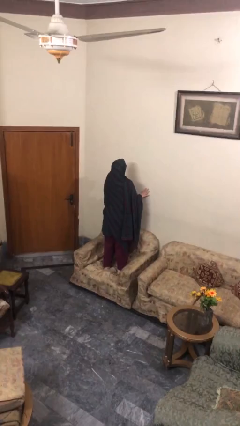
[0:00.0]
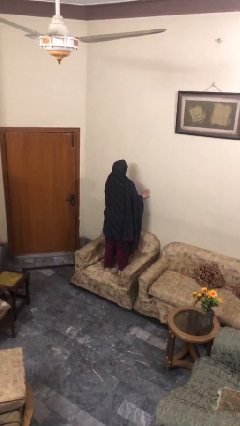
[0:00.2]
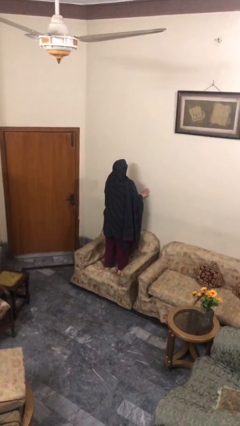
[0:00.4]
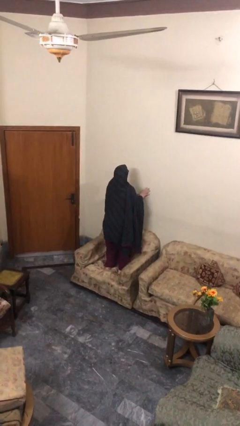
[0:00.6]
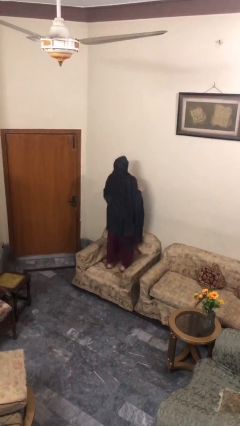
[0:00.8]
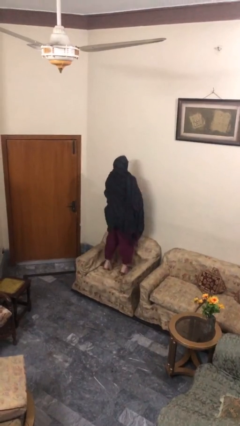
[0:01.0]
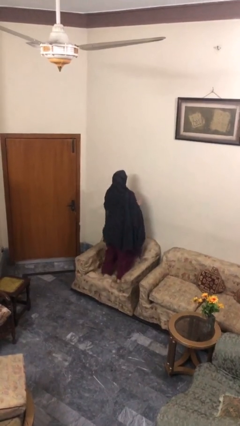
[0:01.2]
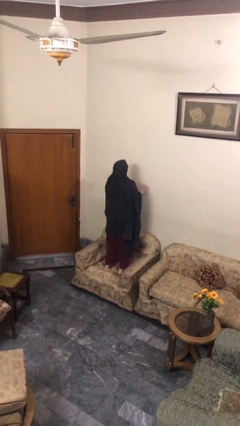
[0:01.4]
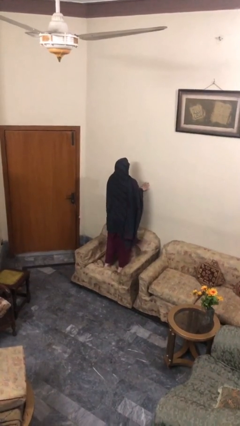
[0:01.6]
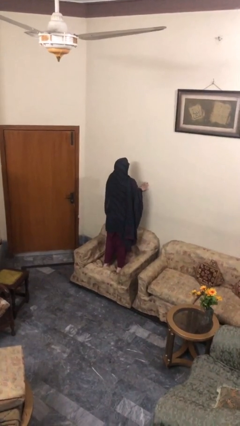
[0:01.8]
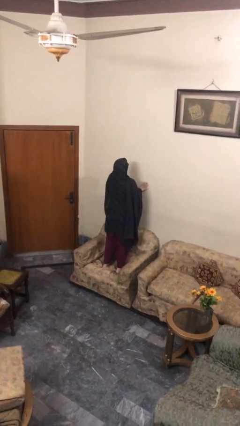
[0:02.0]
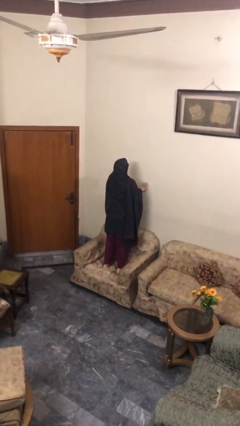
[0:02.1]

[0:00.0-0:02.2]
person jumps on couch

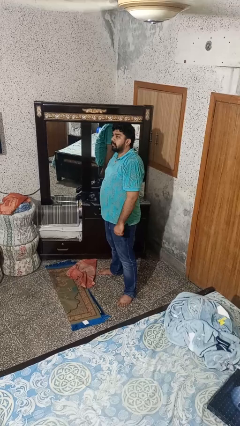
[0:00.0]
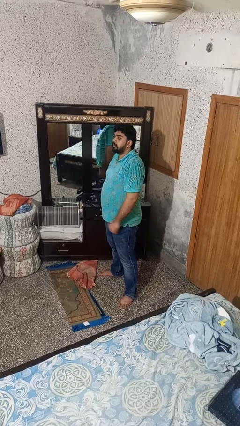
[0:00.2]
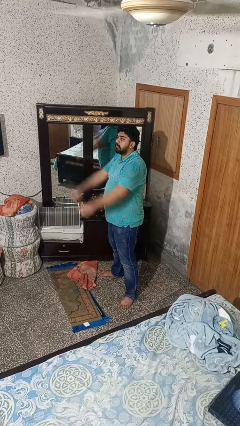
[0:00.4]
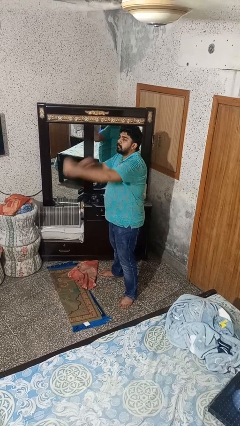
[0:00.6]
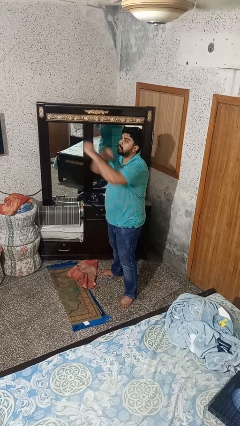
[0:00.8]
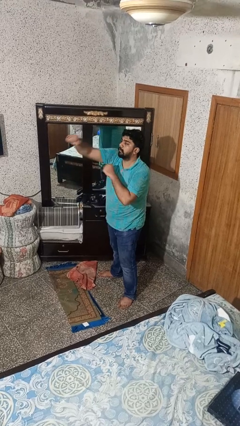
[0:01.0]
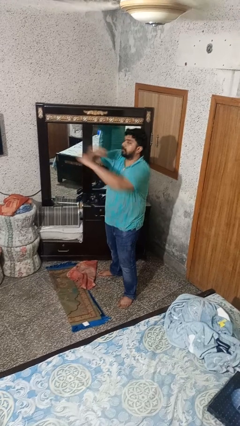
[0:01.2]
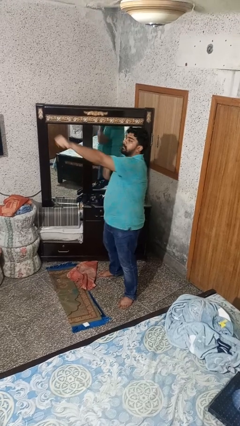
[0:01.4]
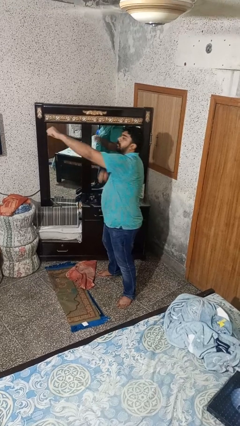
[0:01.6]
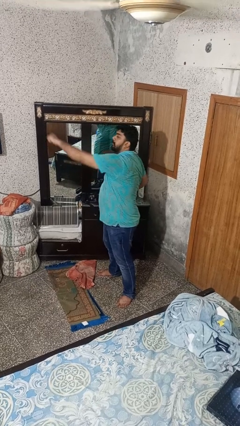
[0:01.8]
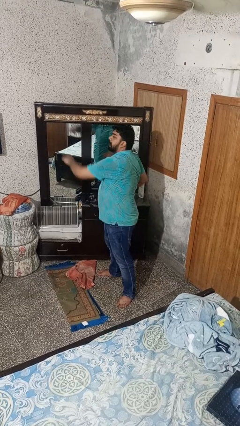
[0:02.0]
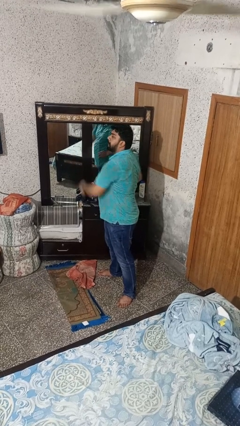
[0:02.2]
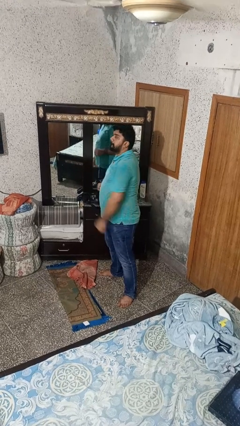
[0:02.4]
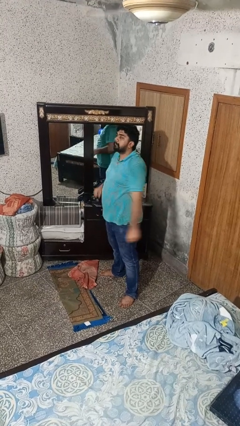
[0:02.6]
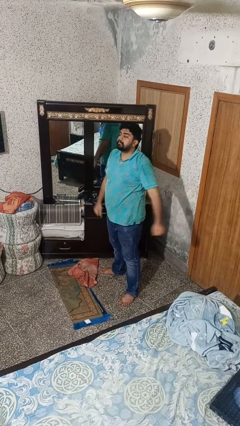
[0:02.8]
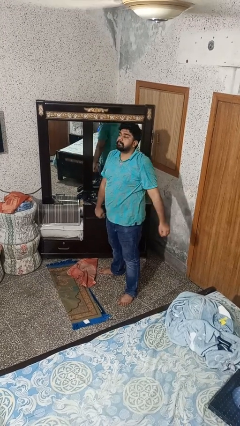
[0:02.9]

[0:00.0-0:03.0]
person punches

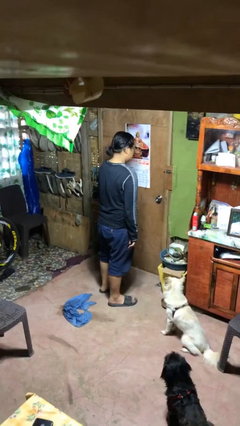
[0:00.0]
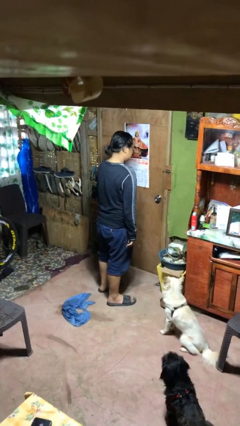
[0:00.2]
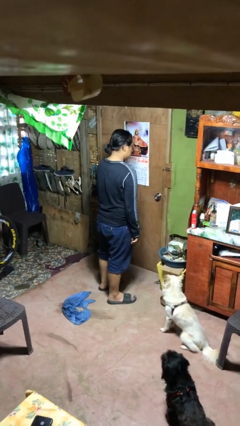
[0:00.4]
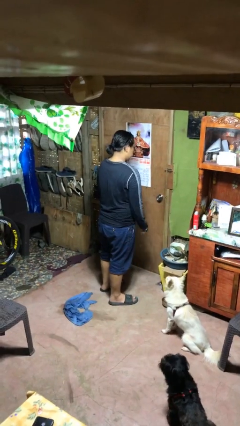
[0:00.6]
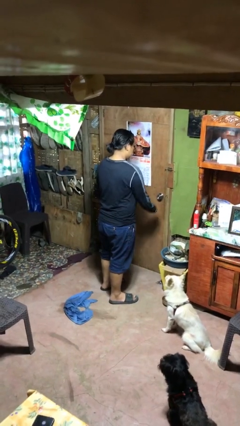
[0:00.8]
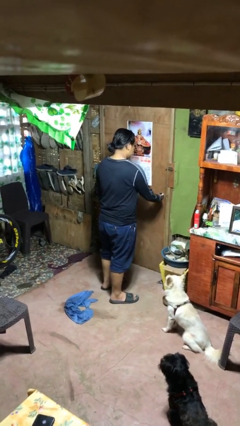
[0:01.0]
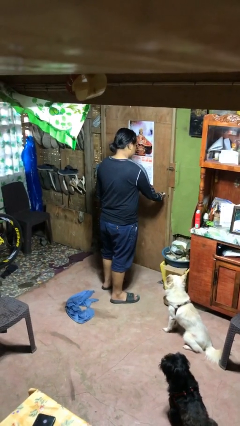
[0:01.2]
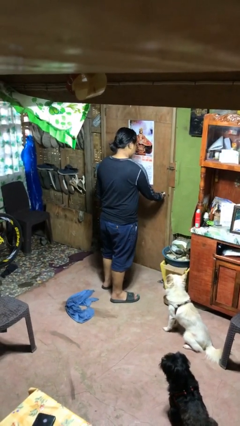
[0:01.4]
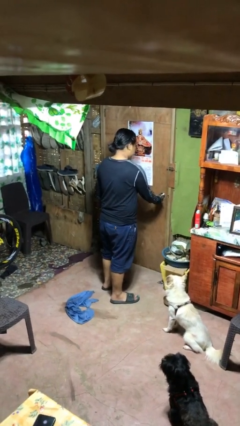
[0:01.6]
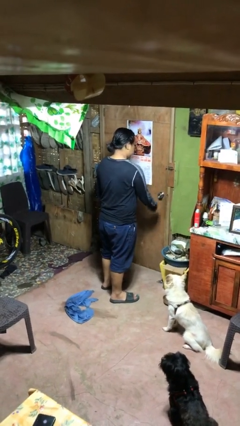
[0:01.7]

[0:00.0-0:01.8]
person unlocks door with keys

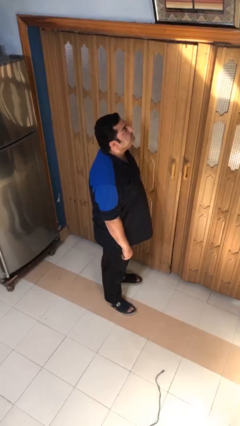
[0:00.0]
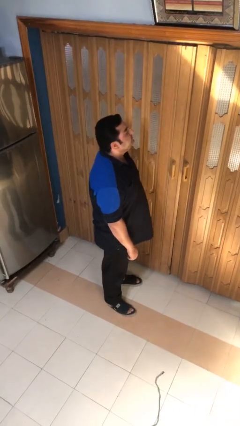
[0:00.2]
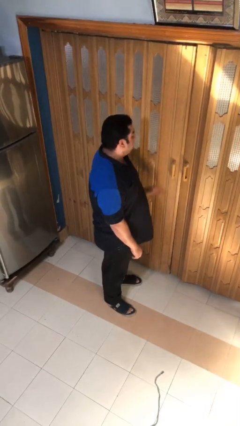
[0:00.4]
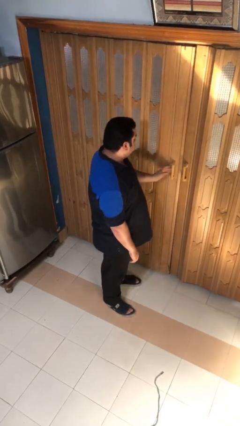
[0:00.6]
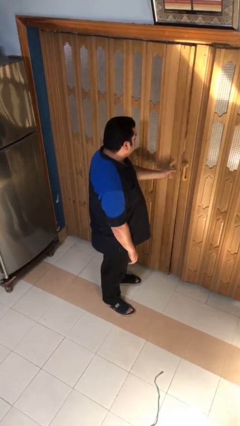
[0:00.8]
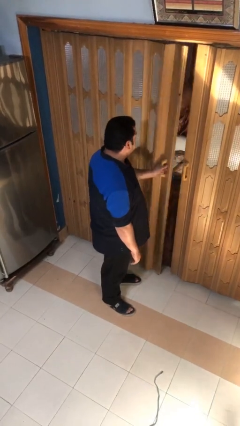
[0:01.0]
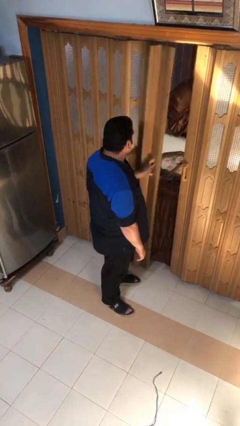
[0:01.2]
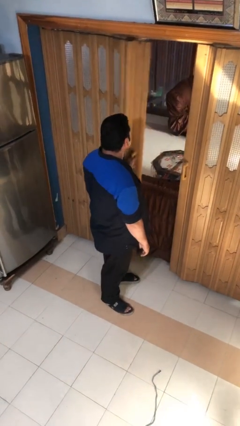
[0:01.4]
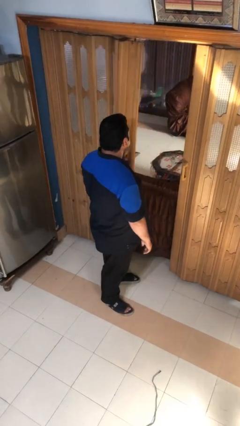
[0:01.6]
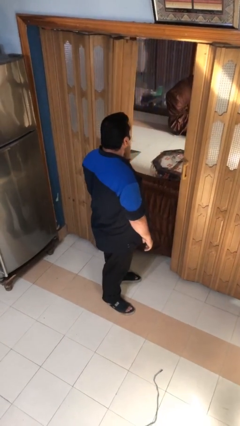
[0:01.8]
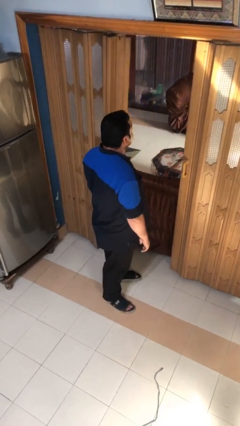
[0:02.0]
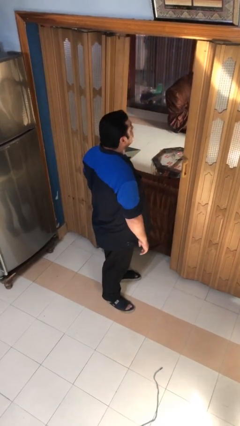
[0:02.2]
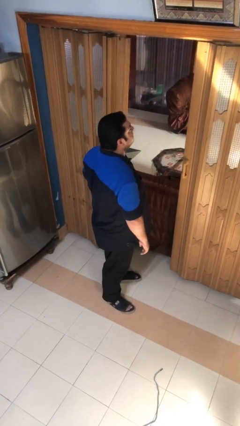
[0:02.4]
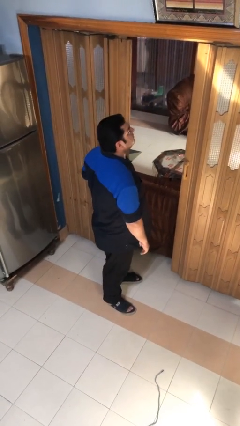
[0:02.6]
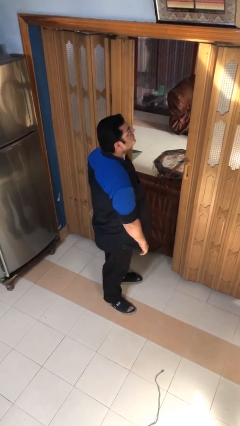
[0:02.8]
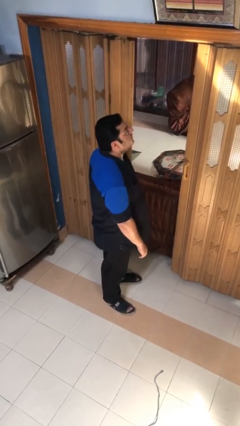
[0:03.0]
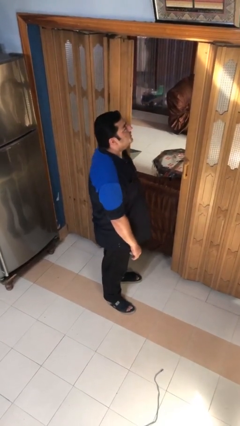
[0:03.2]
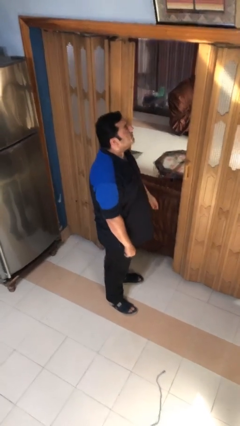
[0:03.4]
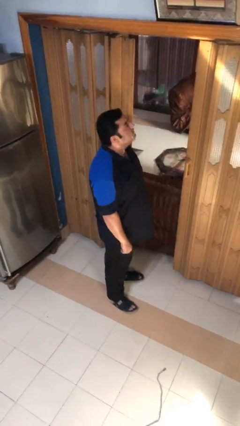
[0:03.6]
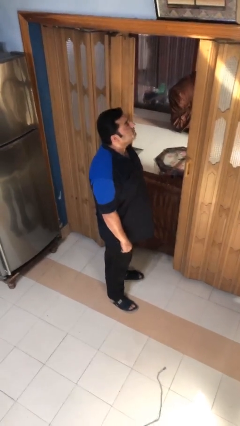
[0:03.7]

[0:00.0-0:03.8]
person opens sliding door

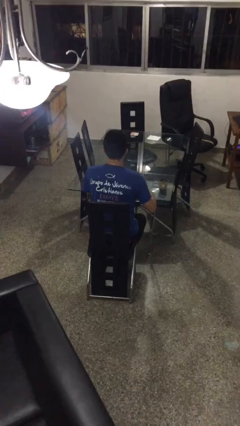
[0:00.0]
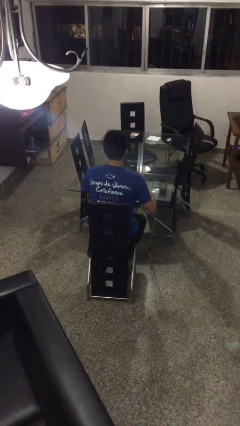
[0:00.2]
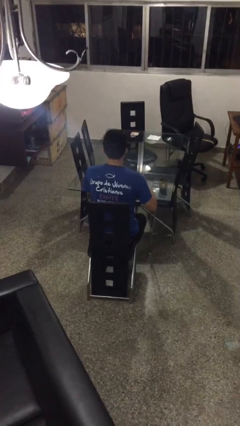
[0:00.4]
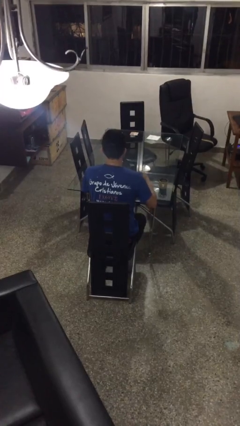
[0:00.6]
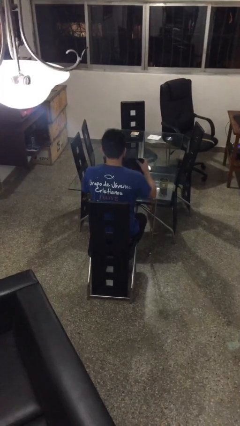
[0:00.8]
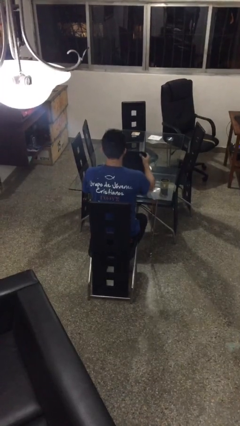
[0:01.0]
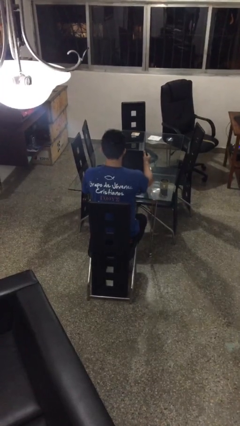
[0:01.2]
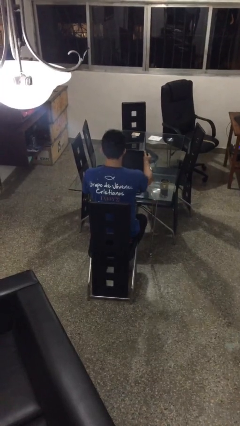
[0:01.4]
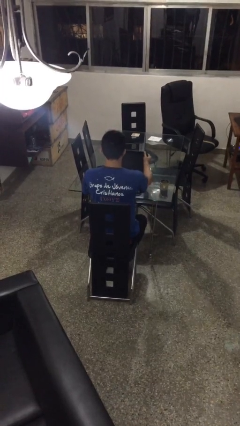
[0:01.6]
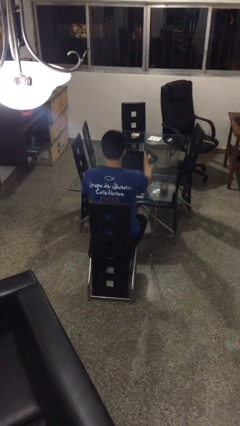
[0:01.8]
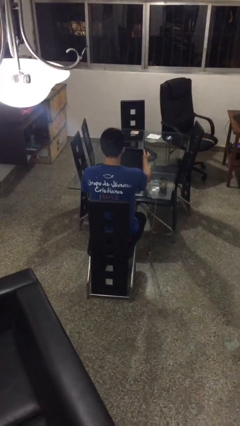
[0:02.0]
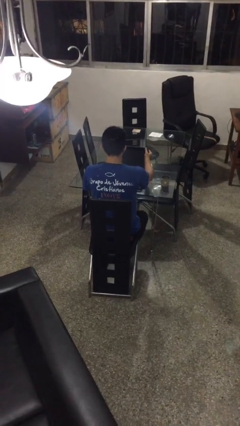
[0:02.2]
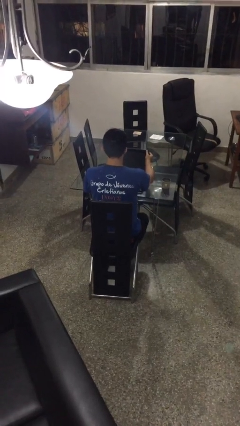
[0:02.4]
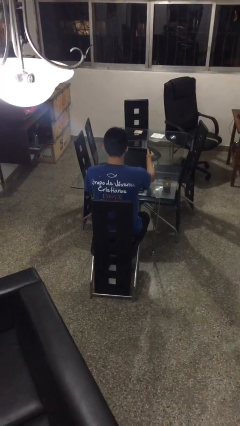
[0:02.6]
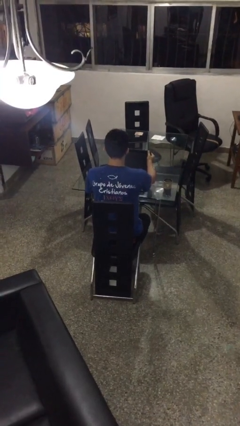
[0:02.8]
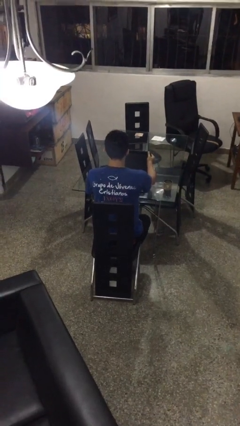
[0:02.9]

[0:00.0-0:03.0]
person opens laptop

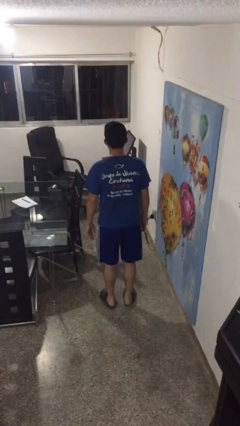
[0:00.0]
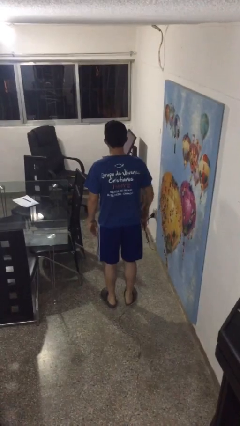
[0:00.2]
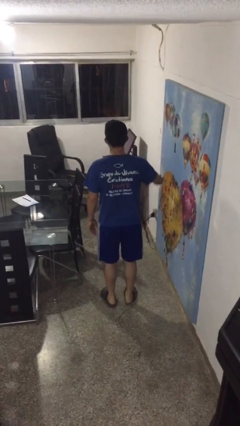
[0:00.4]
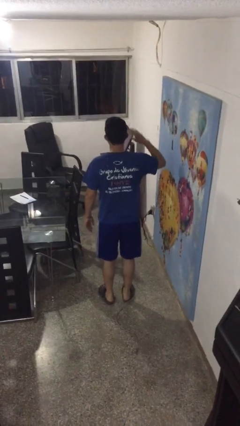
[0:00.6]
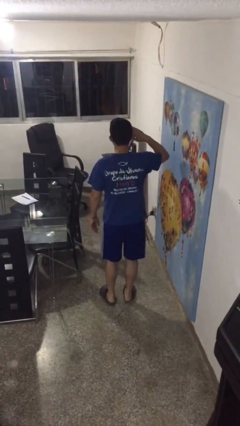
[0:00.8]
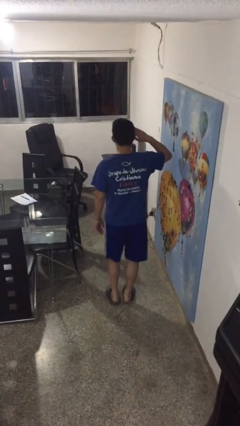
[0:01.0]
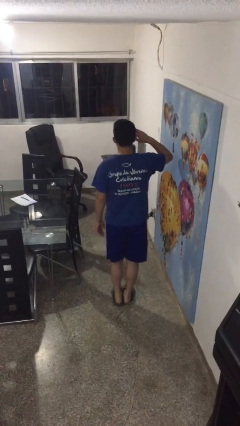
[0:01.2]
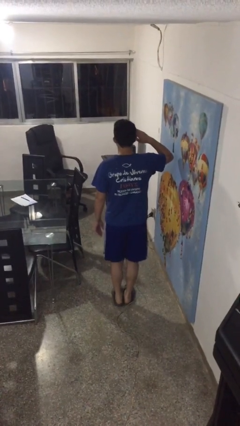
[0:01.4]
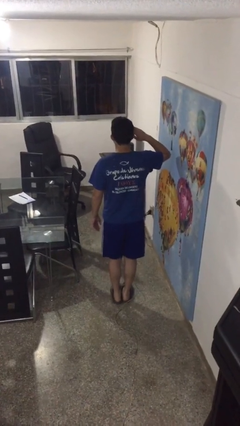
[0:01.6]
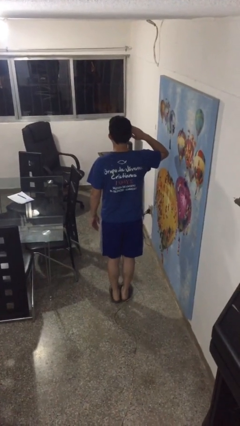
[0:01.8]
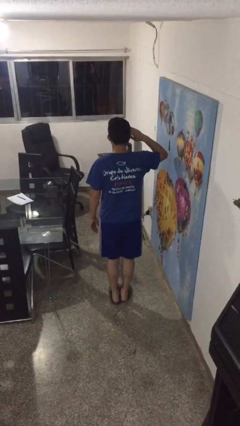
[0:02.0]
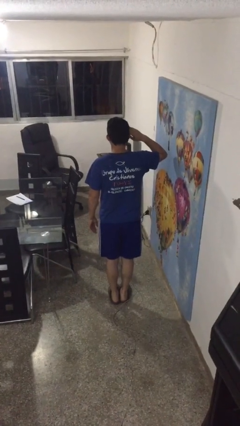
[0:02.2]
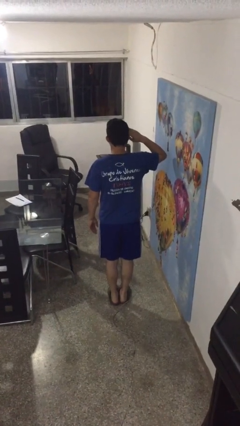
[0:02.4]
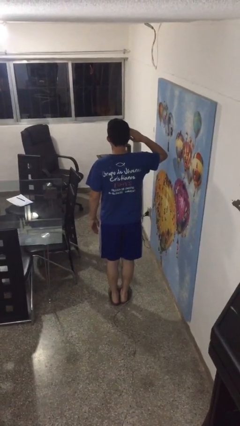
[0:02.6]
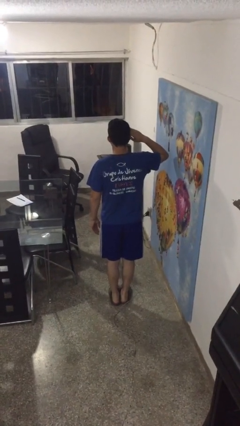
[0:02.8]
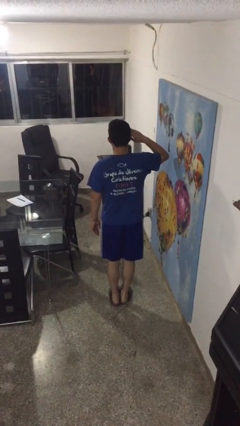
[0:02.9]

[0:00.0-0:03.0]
person salutes

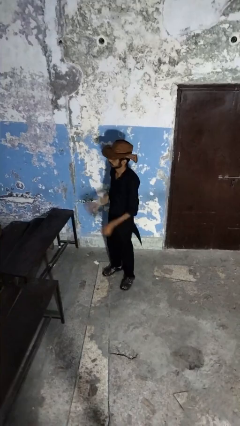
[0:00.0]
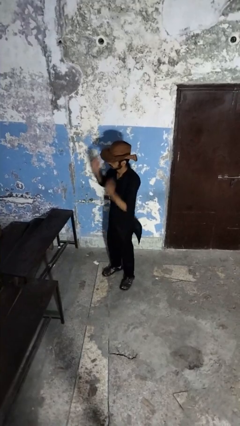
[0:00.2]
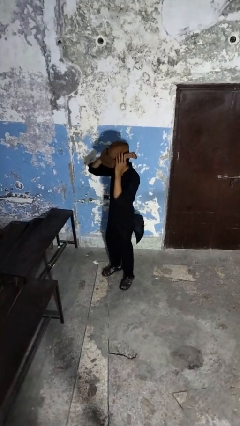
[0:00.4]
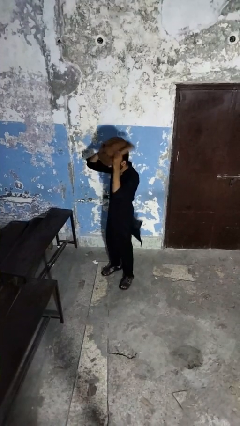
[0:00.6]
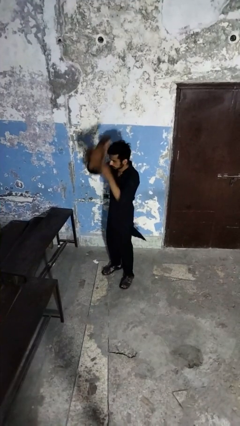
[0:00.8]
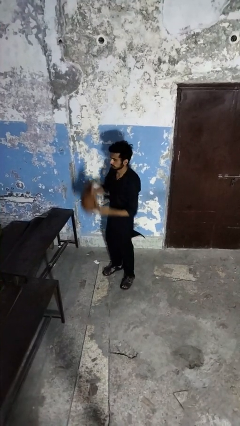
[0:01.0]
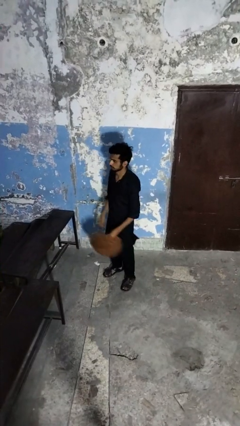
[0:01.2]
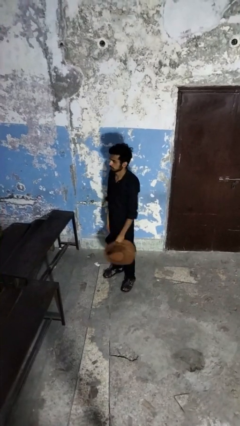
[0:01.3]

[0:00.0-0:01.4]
person takes off hat
